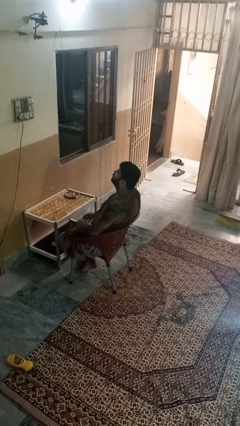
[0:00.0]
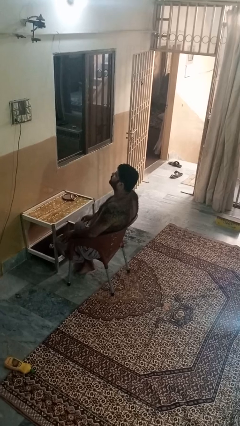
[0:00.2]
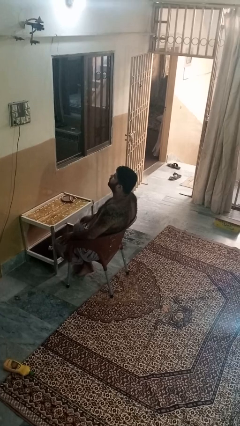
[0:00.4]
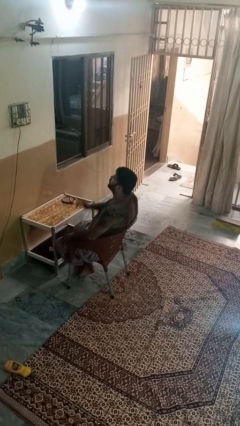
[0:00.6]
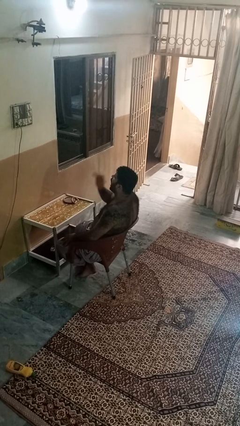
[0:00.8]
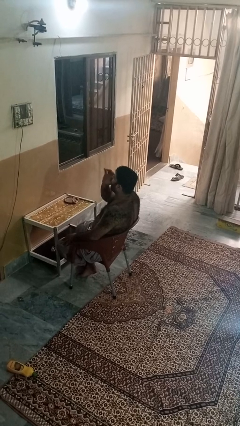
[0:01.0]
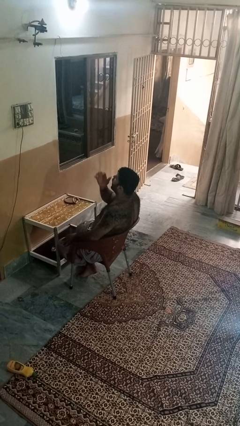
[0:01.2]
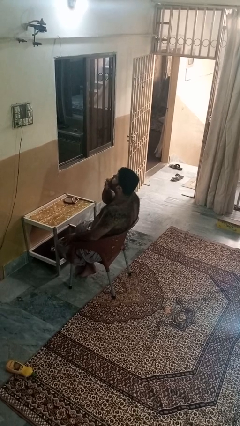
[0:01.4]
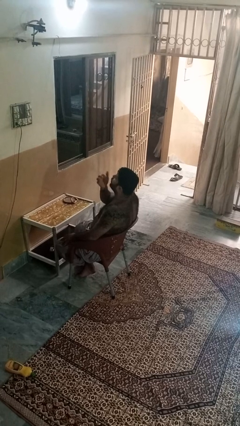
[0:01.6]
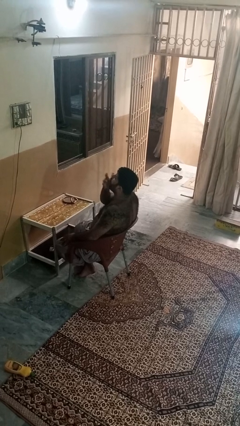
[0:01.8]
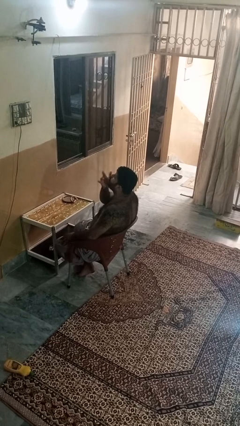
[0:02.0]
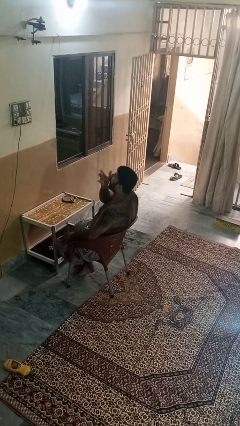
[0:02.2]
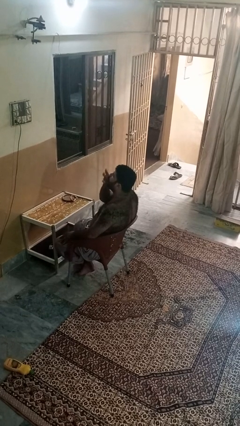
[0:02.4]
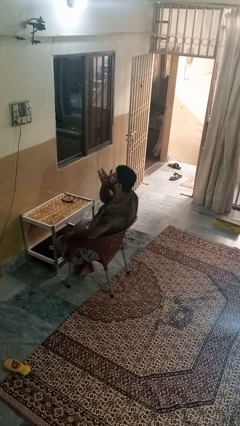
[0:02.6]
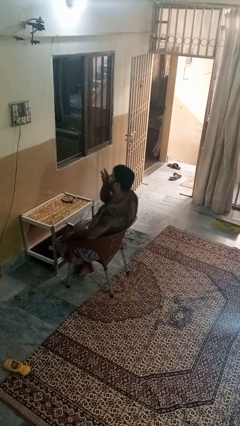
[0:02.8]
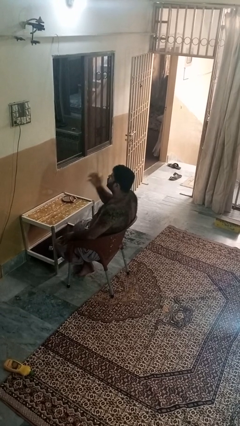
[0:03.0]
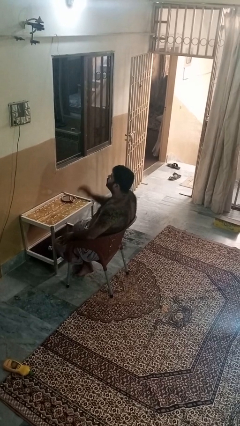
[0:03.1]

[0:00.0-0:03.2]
person licks fingers

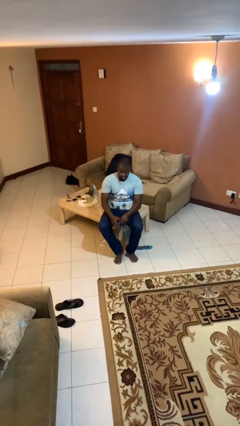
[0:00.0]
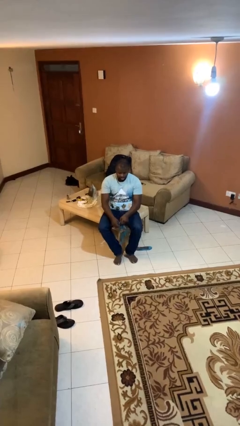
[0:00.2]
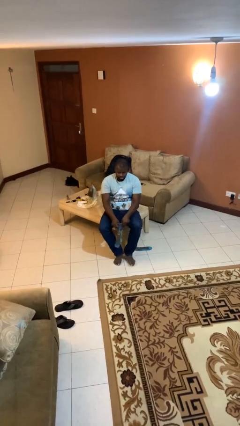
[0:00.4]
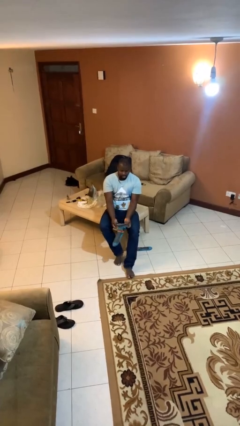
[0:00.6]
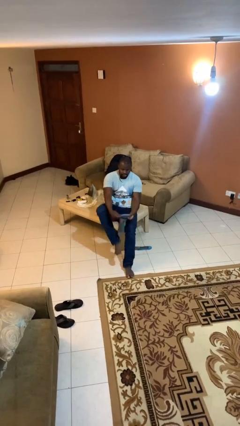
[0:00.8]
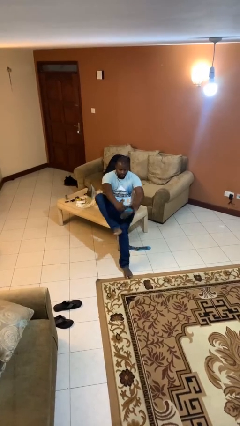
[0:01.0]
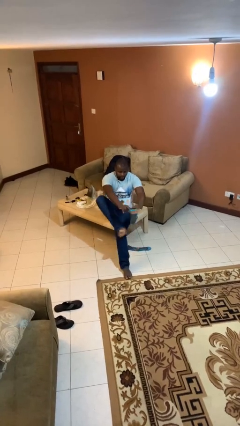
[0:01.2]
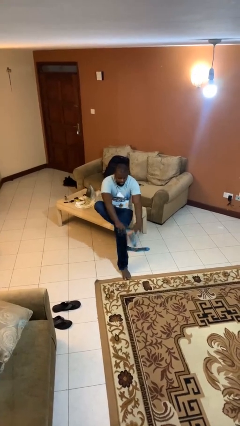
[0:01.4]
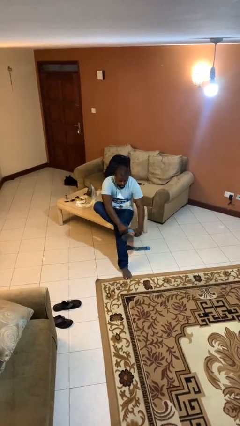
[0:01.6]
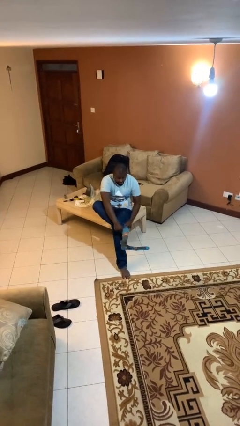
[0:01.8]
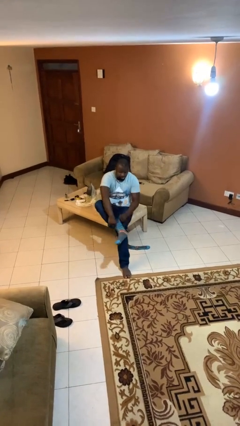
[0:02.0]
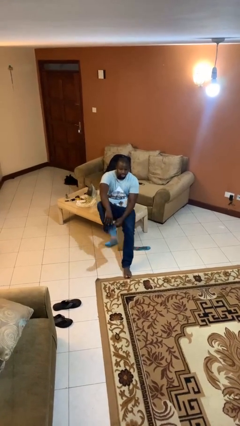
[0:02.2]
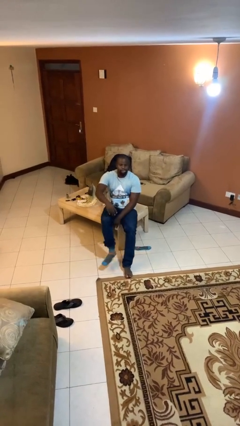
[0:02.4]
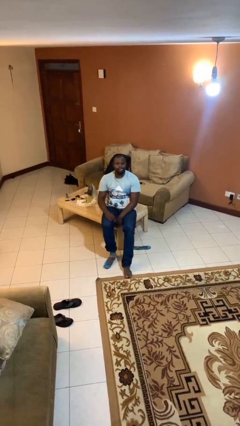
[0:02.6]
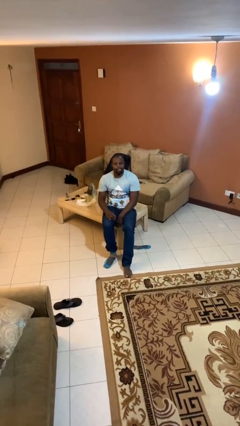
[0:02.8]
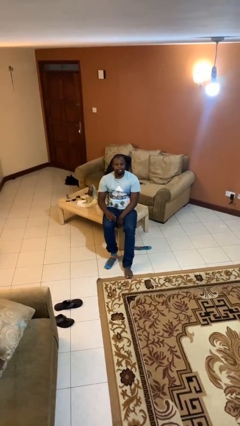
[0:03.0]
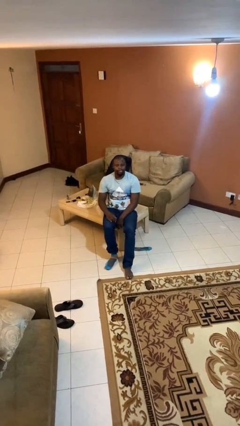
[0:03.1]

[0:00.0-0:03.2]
person puts on socks

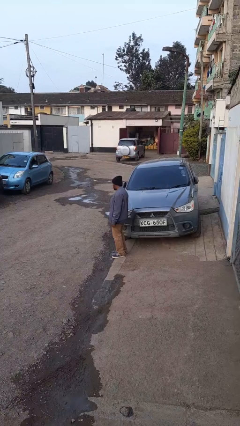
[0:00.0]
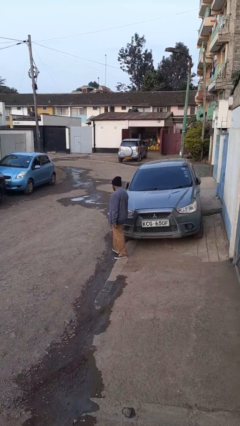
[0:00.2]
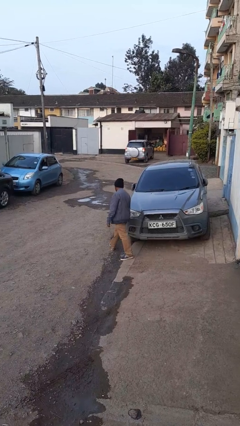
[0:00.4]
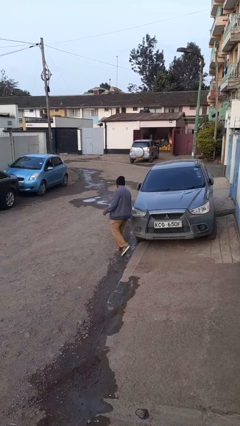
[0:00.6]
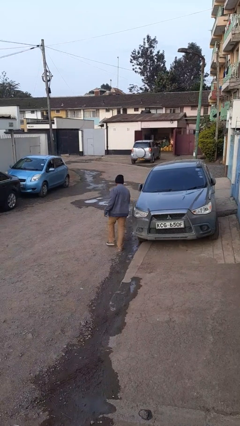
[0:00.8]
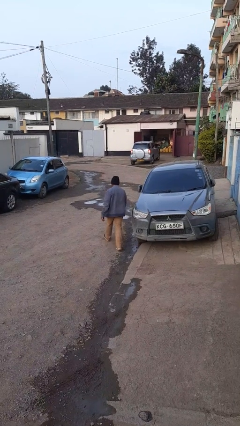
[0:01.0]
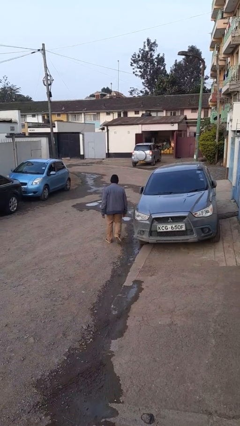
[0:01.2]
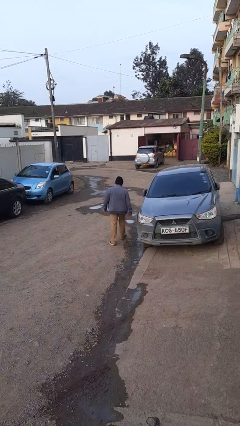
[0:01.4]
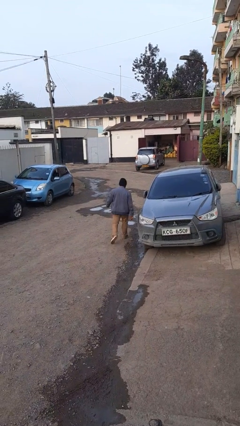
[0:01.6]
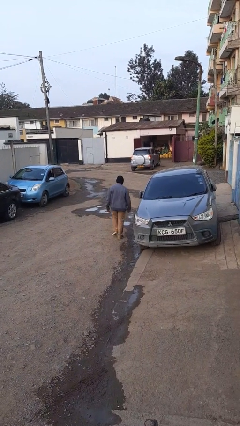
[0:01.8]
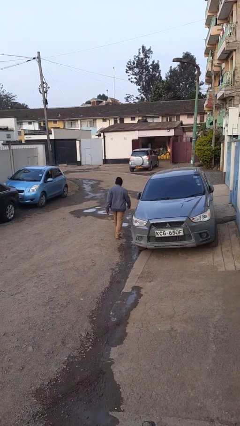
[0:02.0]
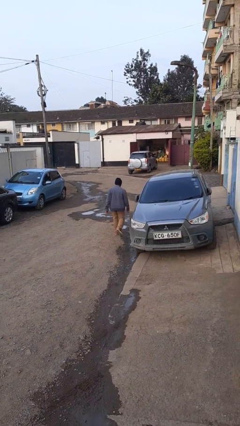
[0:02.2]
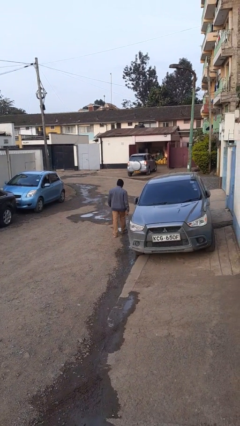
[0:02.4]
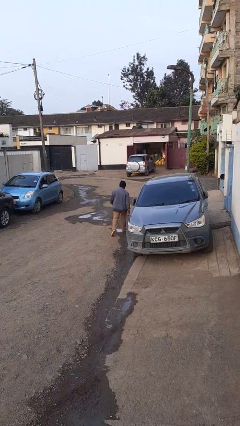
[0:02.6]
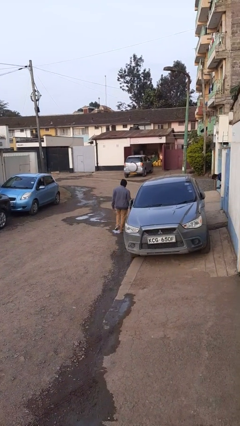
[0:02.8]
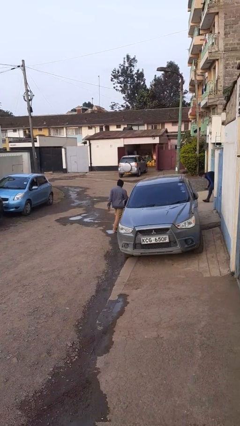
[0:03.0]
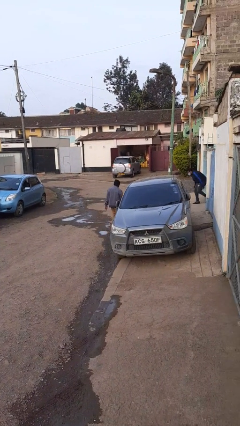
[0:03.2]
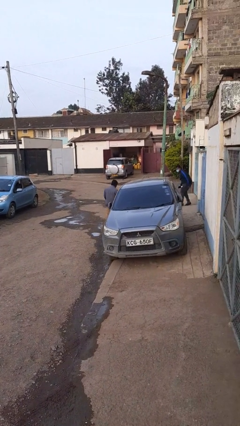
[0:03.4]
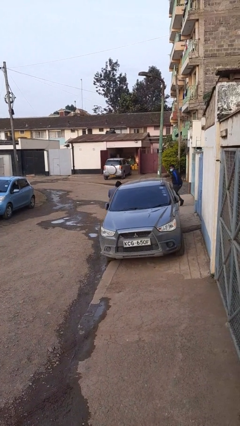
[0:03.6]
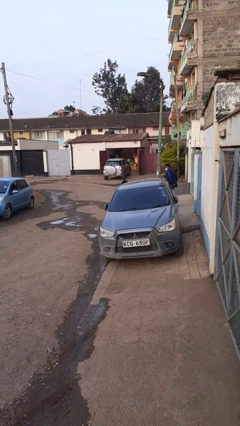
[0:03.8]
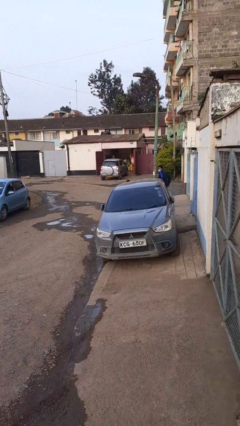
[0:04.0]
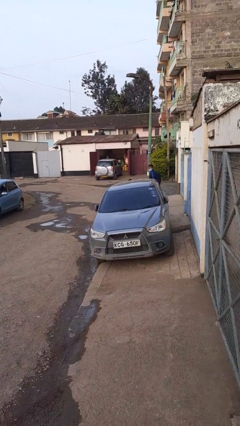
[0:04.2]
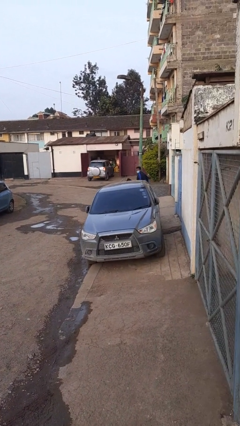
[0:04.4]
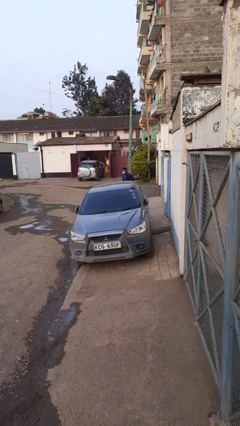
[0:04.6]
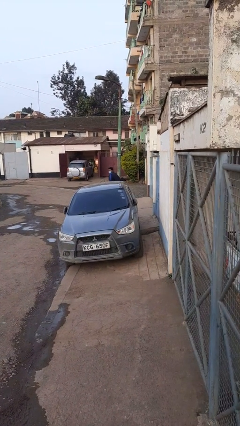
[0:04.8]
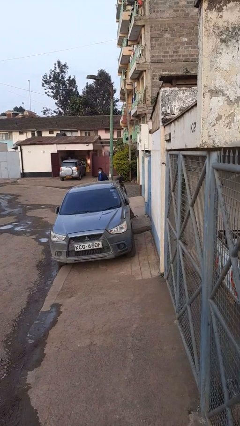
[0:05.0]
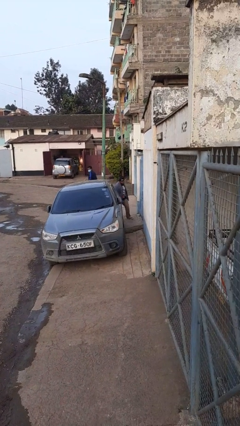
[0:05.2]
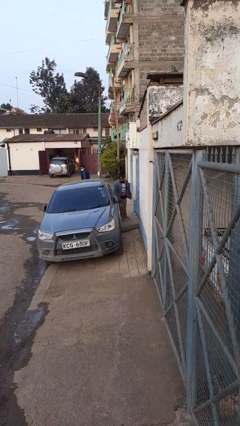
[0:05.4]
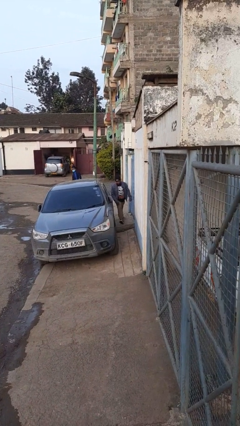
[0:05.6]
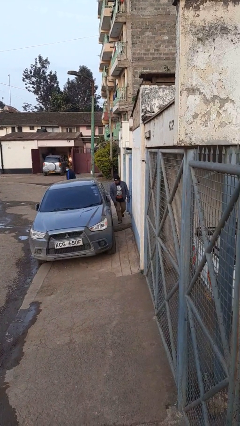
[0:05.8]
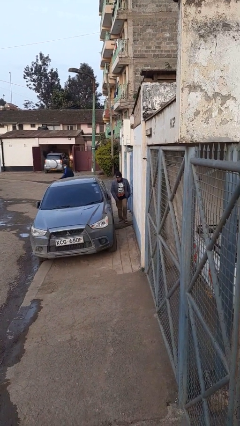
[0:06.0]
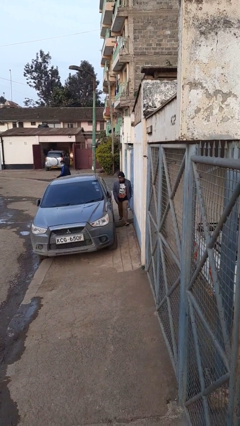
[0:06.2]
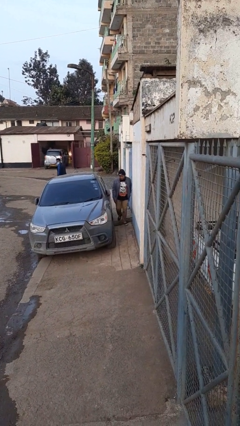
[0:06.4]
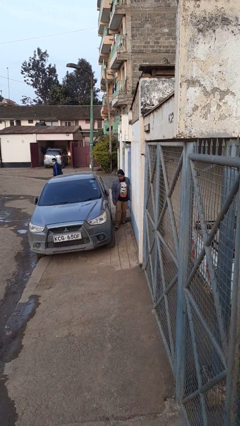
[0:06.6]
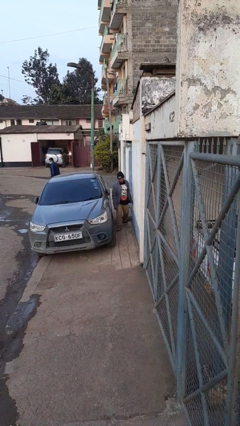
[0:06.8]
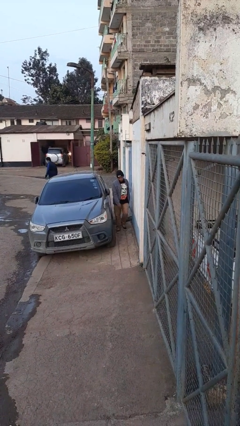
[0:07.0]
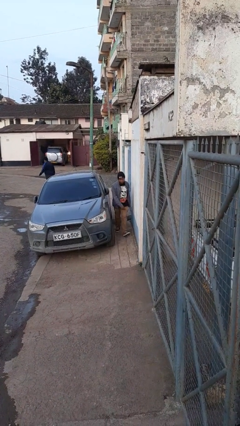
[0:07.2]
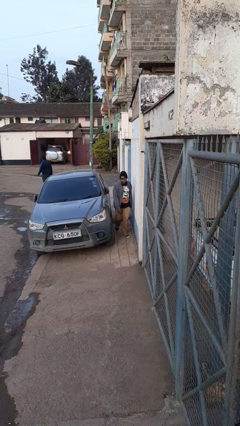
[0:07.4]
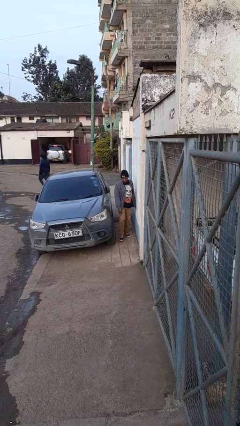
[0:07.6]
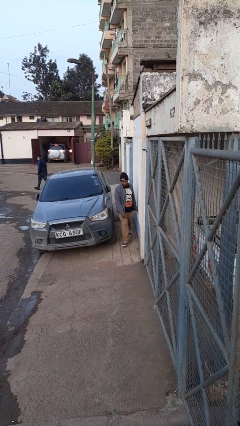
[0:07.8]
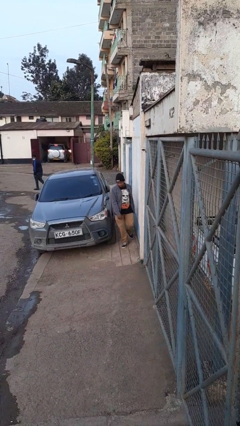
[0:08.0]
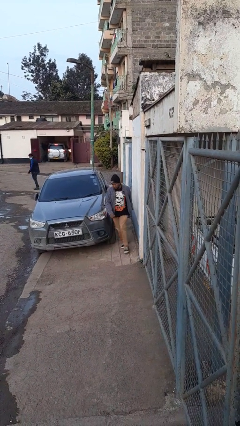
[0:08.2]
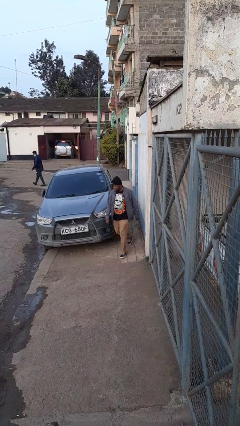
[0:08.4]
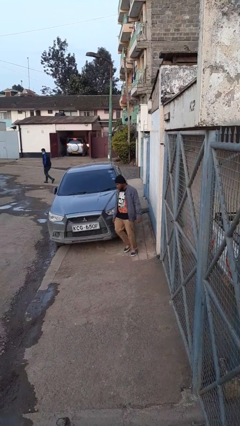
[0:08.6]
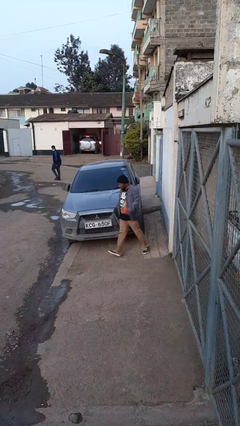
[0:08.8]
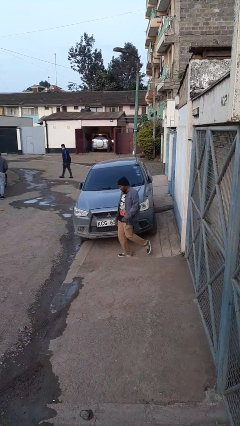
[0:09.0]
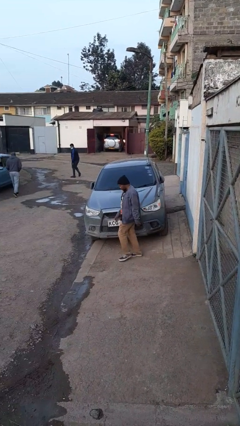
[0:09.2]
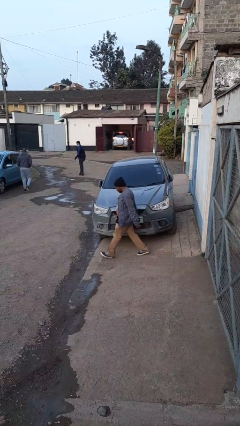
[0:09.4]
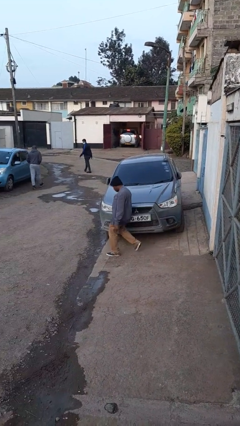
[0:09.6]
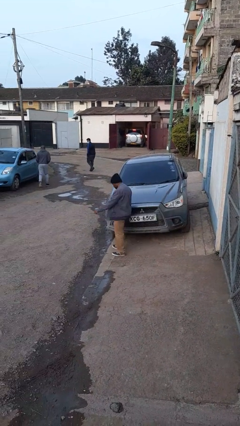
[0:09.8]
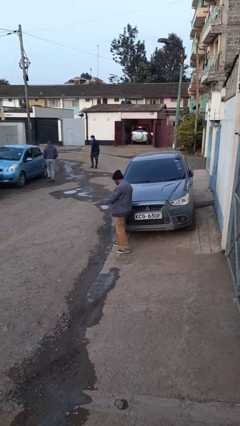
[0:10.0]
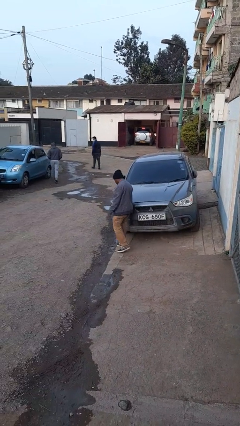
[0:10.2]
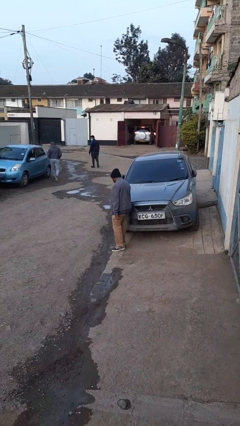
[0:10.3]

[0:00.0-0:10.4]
person walks around car

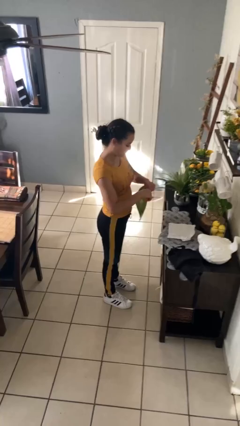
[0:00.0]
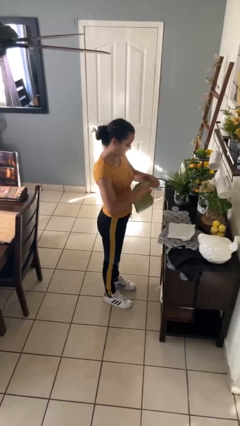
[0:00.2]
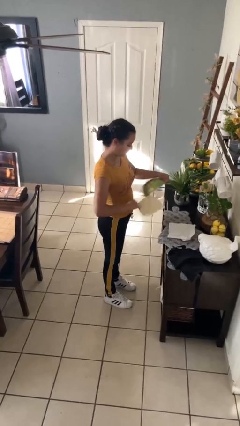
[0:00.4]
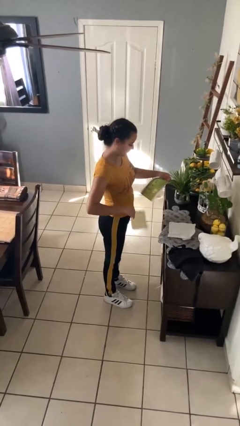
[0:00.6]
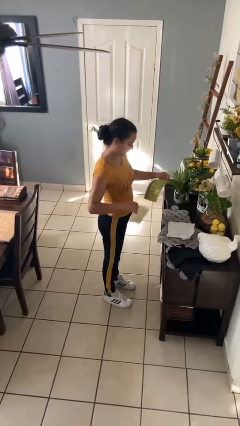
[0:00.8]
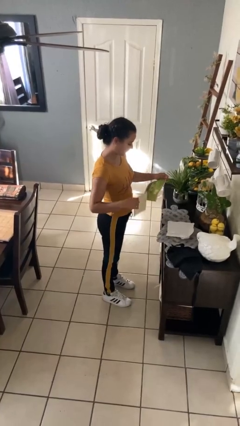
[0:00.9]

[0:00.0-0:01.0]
person tears paper

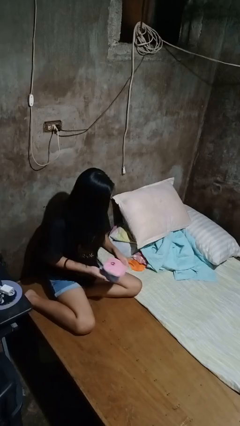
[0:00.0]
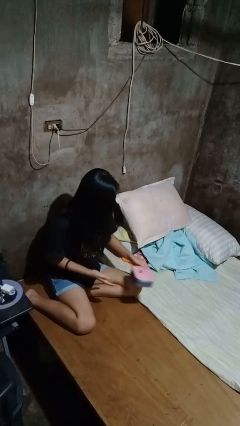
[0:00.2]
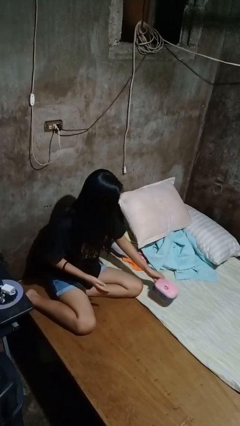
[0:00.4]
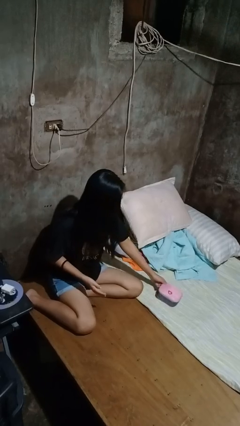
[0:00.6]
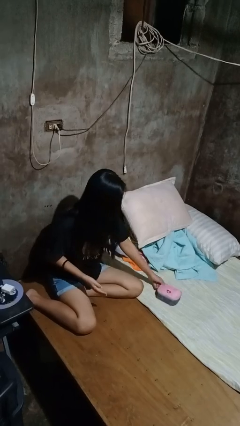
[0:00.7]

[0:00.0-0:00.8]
person puts down object on bed
